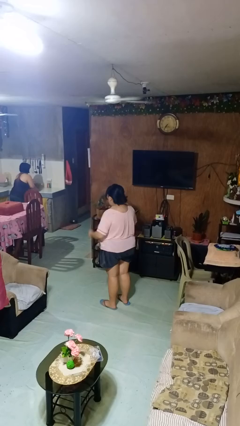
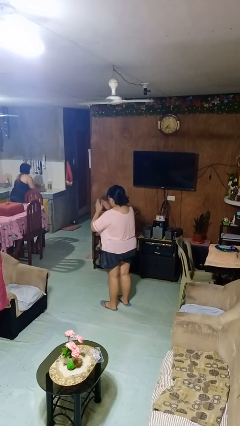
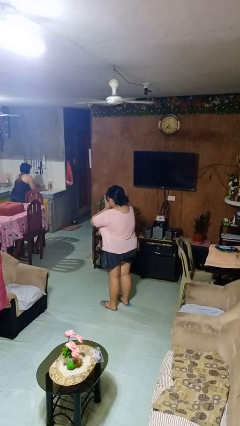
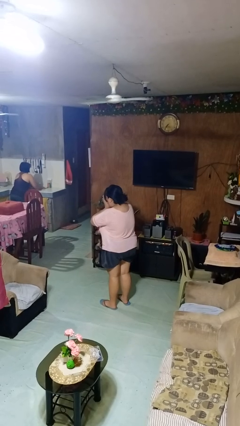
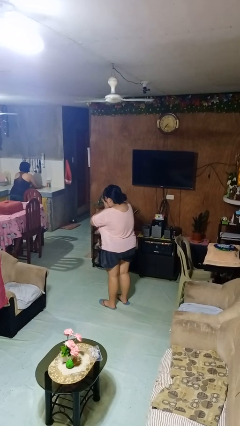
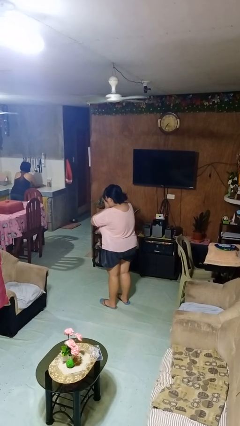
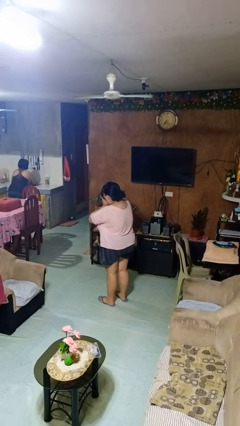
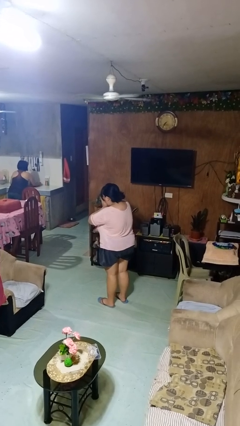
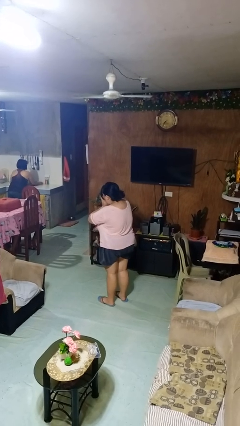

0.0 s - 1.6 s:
person blows into hands

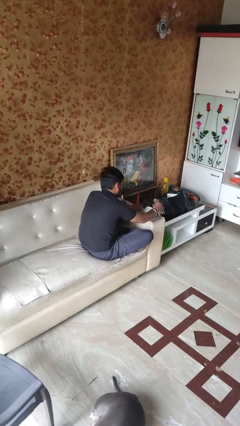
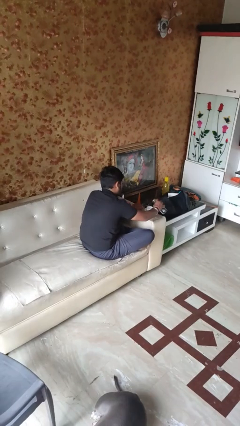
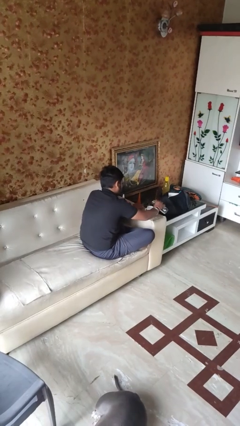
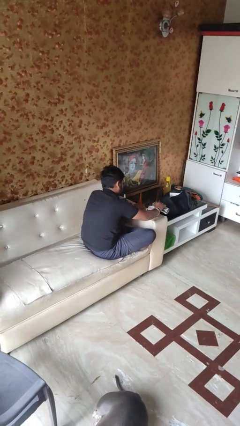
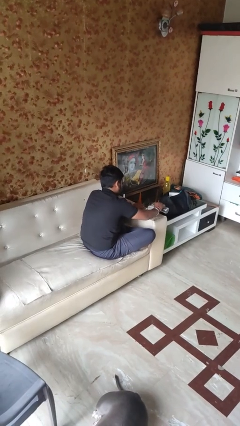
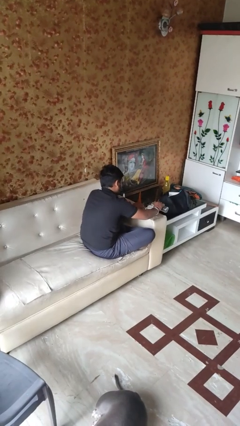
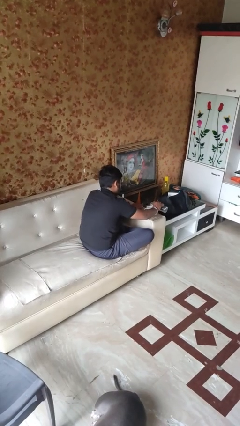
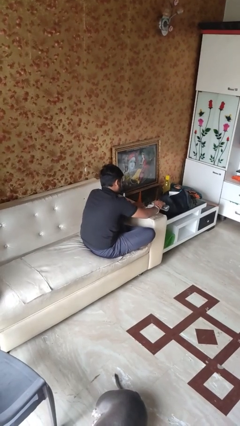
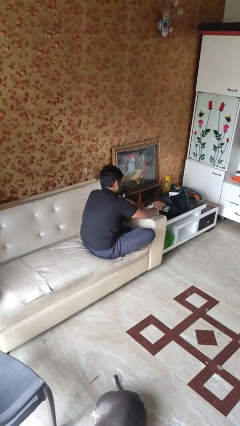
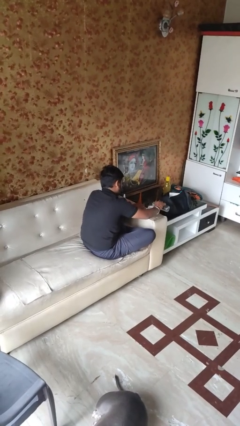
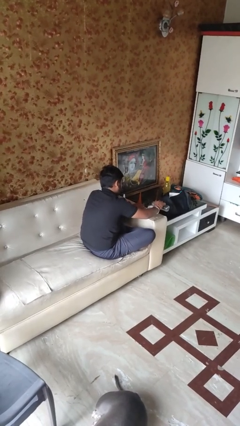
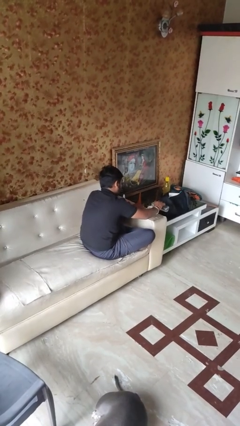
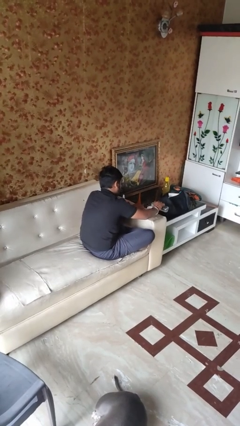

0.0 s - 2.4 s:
person pours liquid into cup

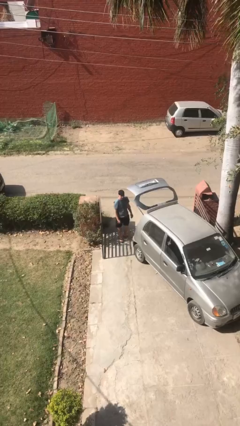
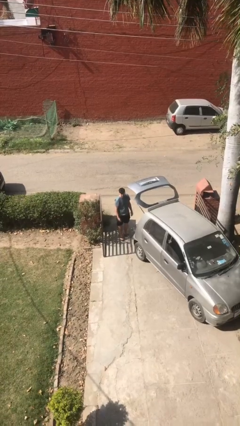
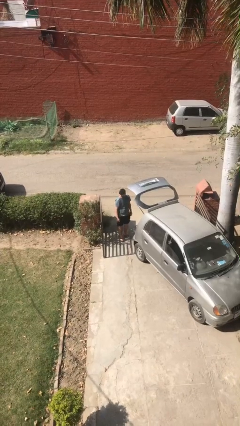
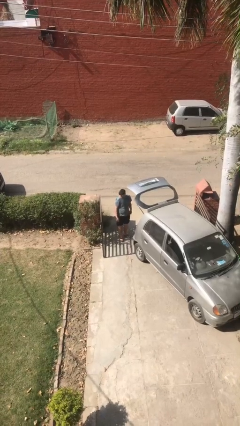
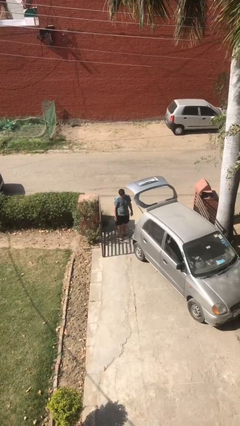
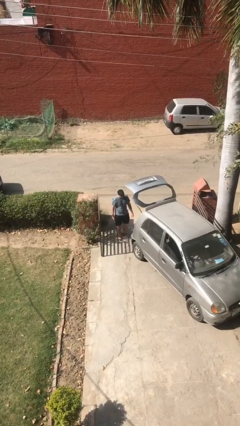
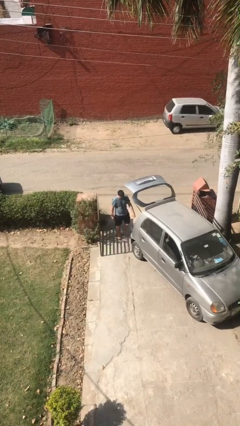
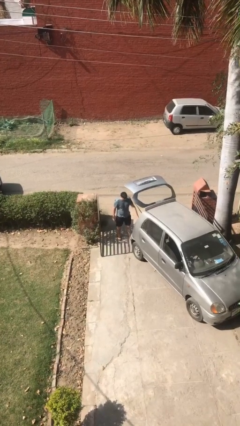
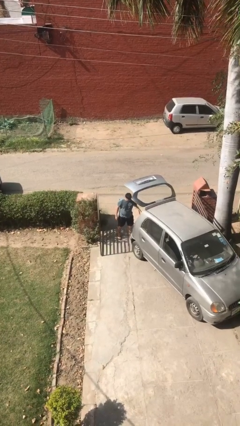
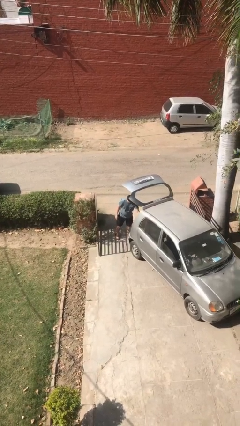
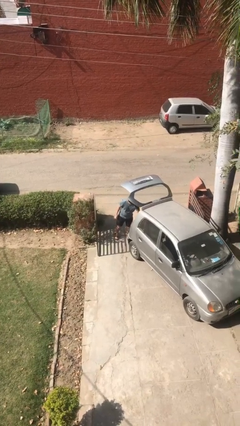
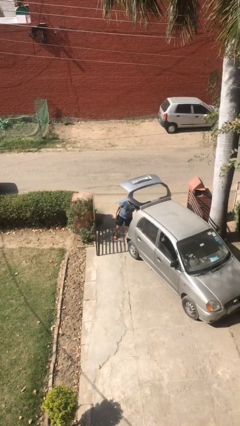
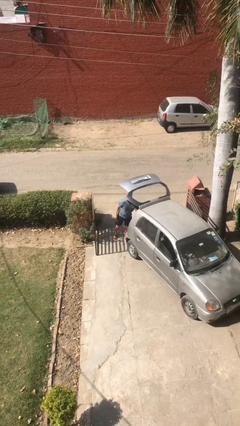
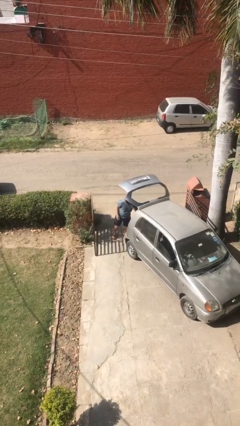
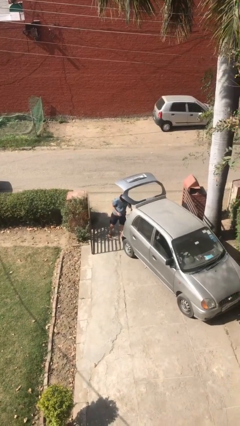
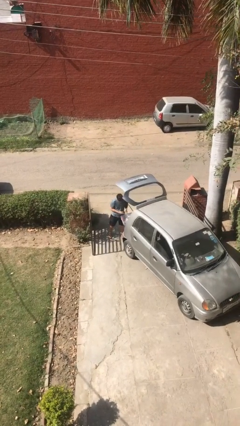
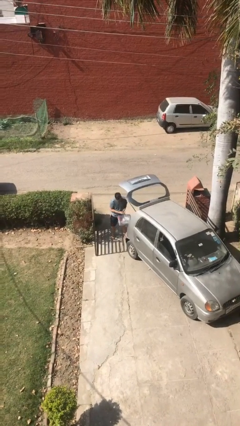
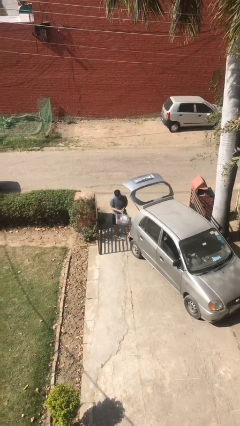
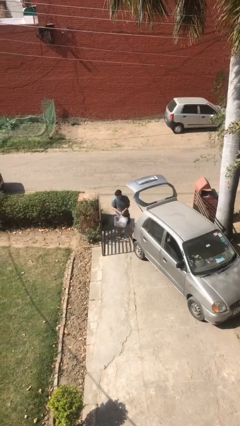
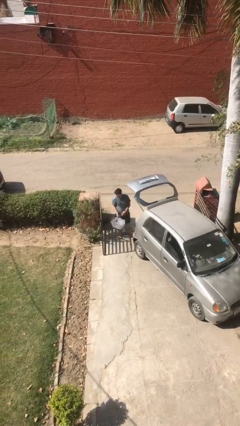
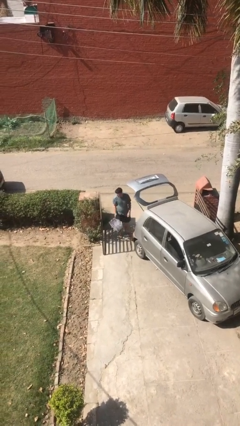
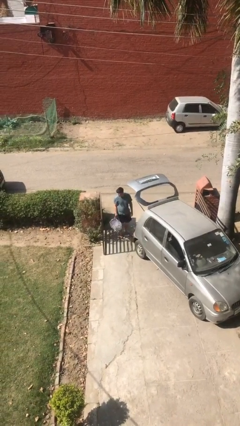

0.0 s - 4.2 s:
person unloads car

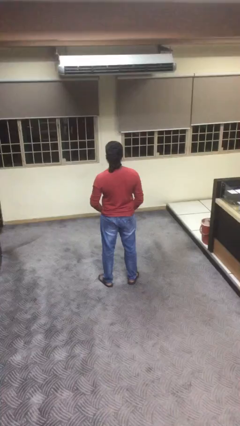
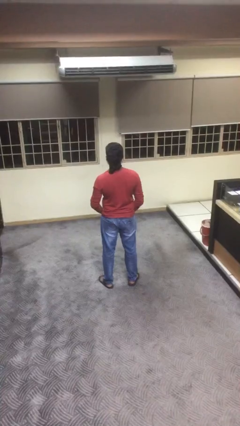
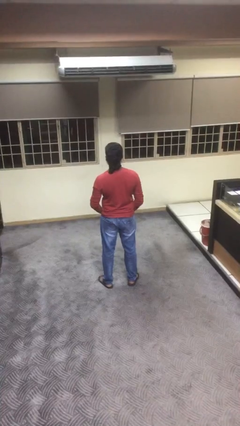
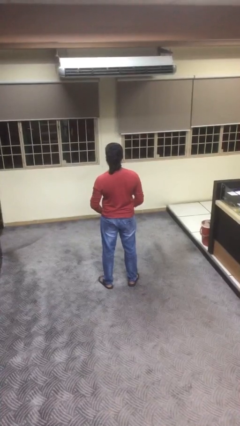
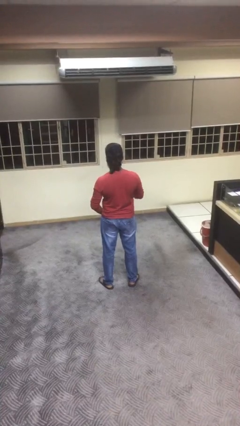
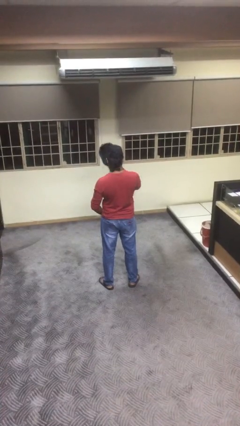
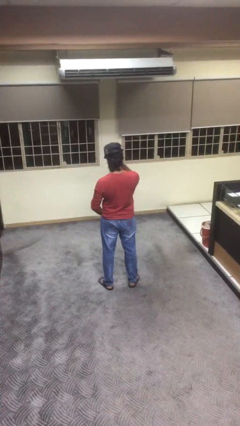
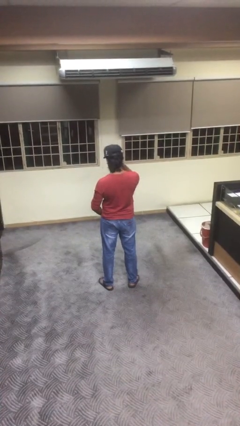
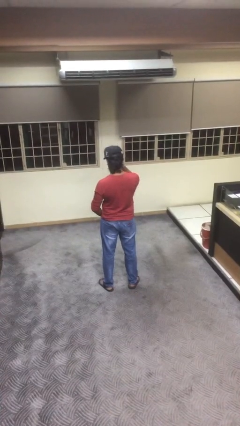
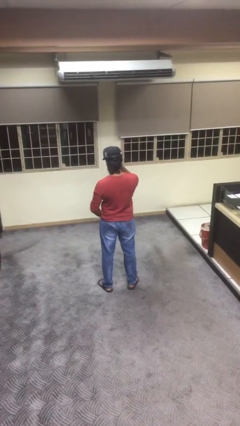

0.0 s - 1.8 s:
person puts on hat

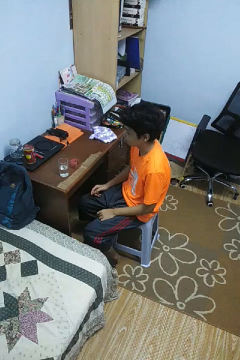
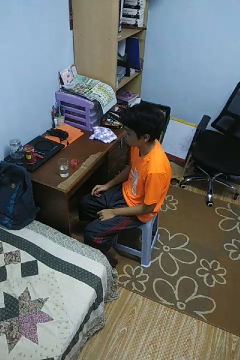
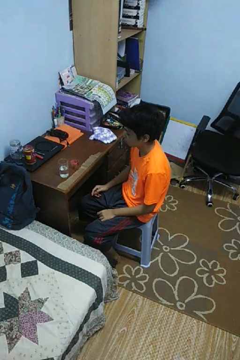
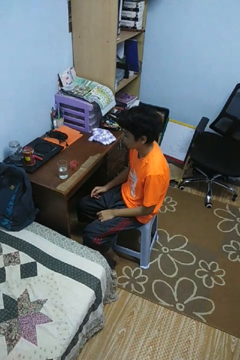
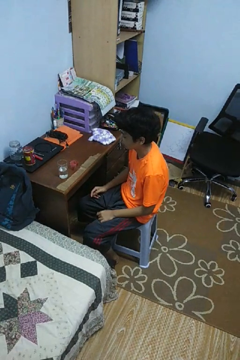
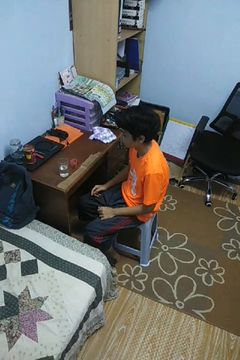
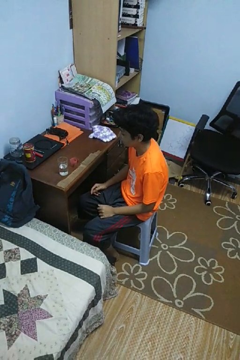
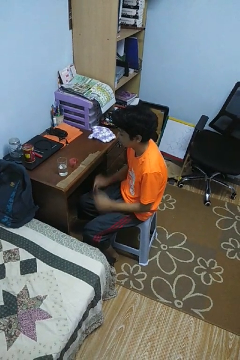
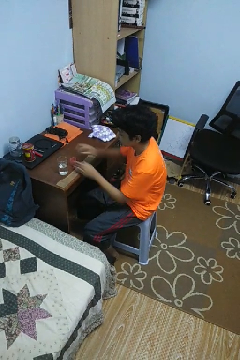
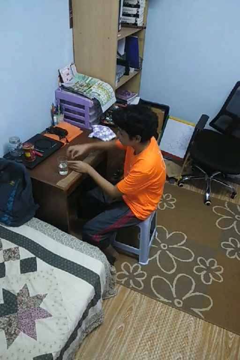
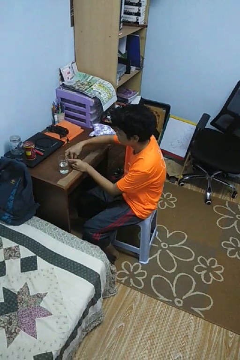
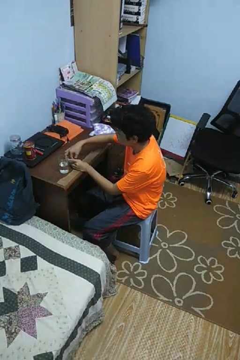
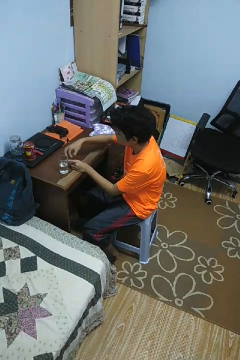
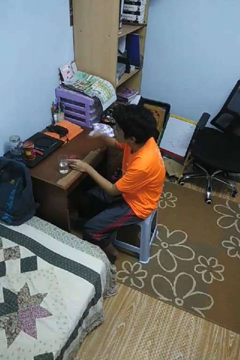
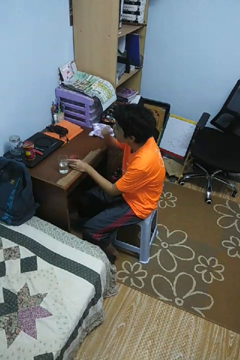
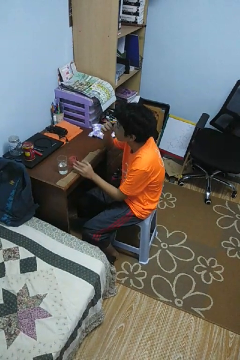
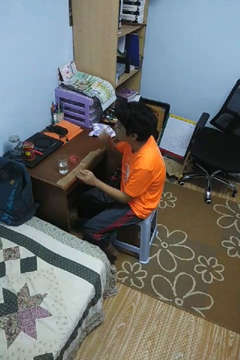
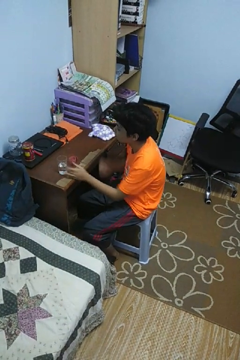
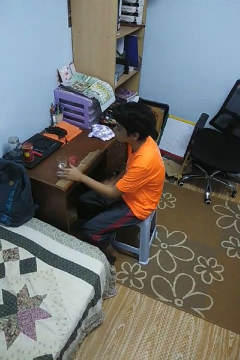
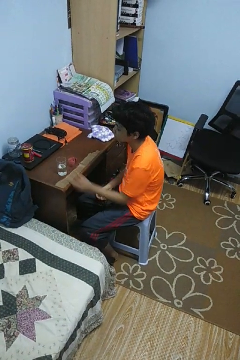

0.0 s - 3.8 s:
person takes medicine pills

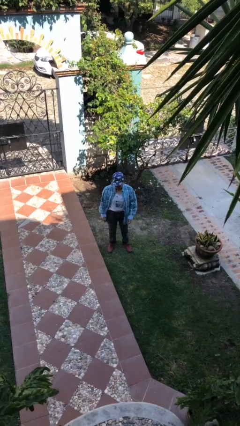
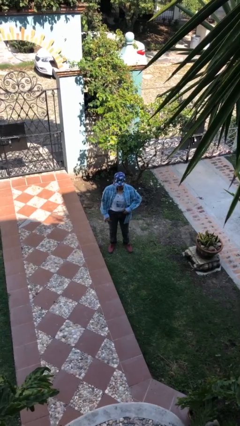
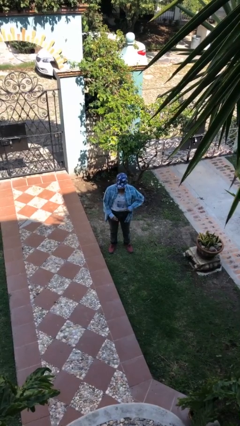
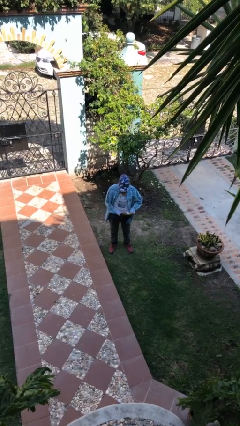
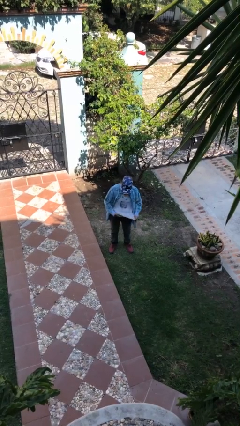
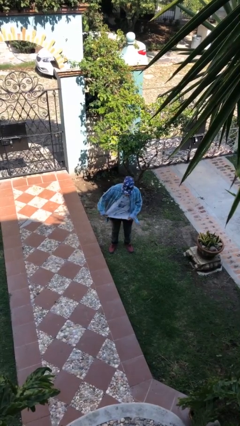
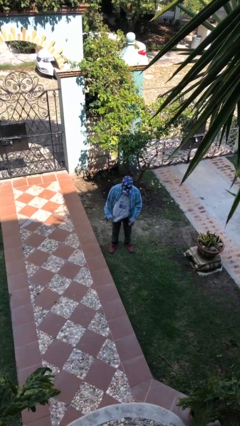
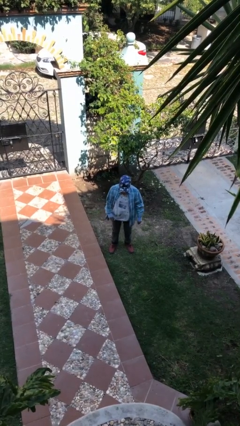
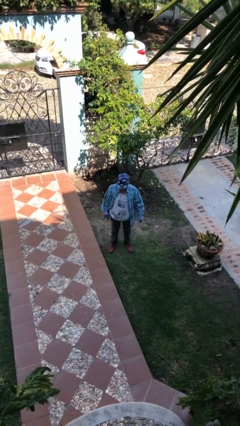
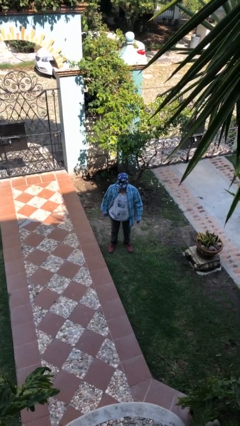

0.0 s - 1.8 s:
person untucks shirt

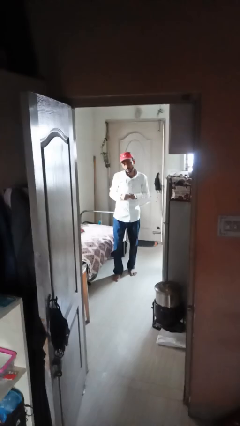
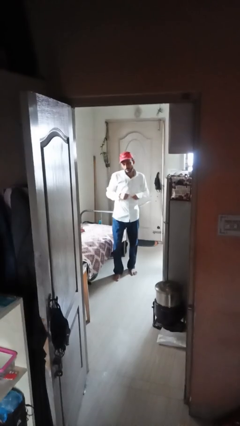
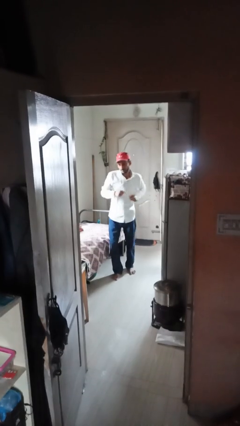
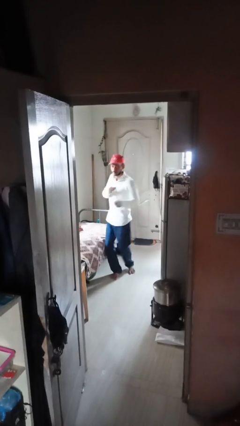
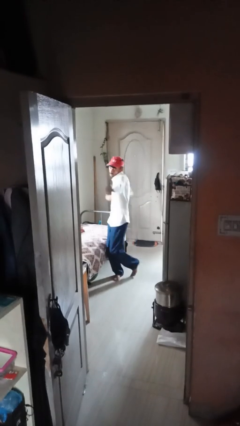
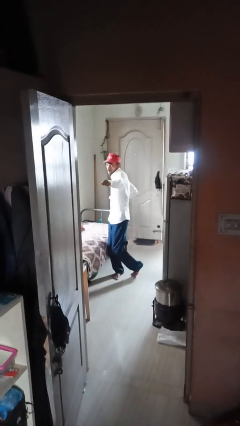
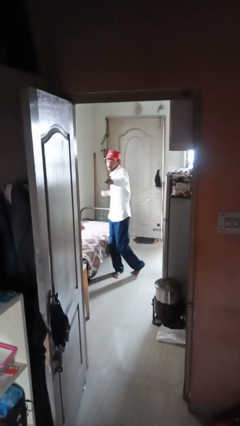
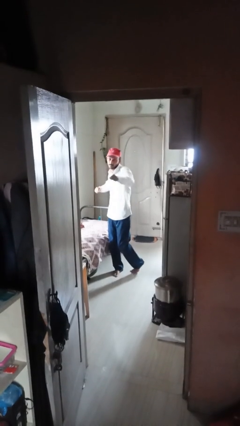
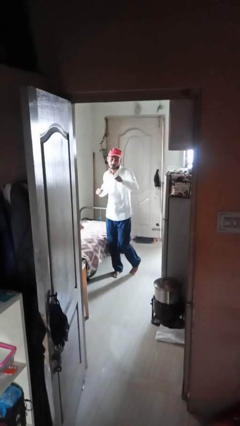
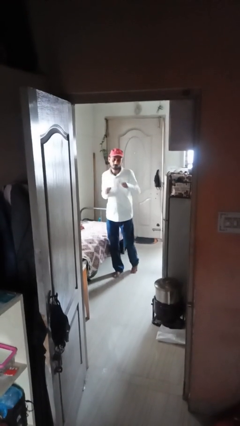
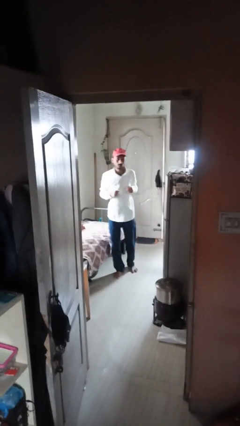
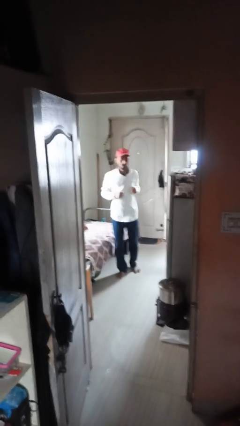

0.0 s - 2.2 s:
person punches

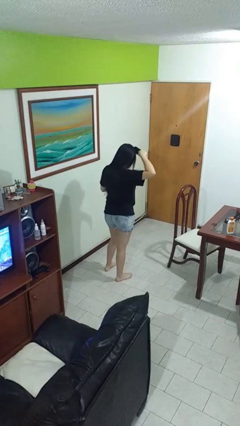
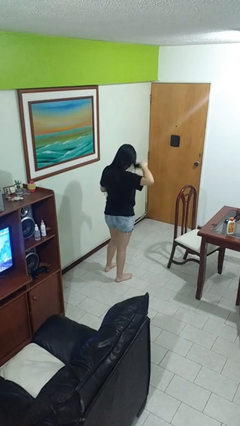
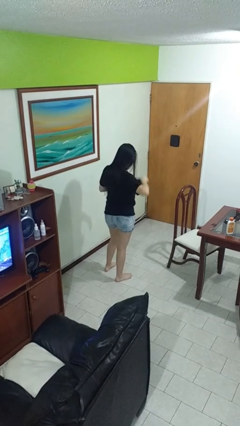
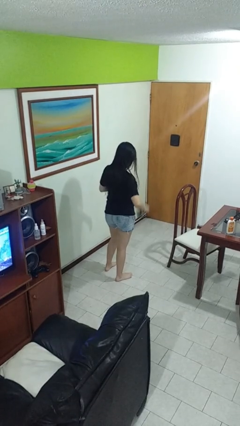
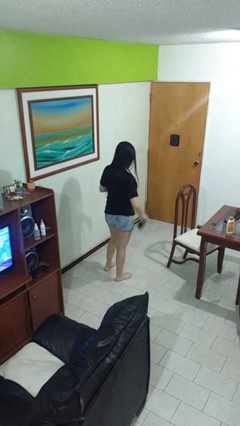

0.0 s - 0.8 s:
person brushes hair
